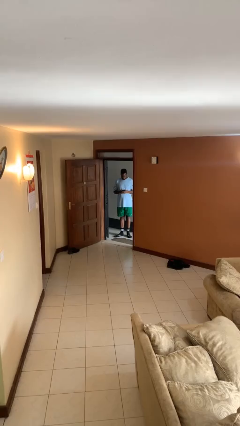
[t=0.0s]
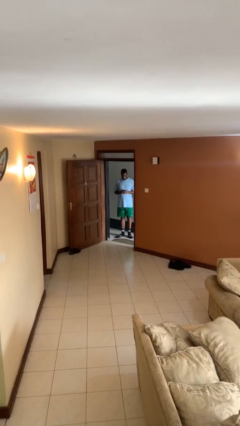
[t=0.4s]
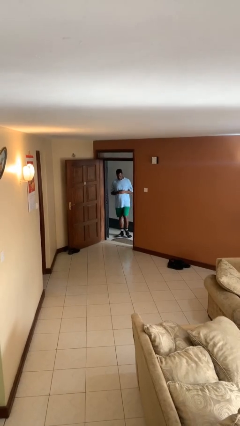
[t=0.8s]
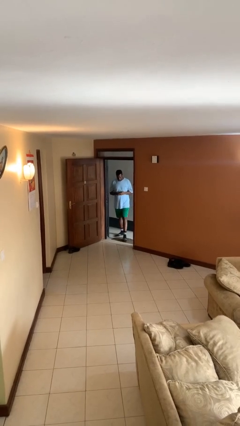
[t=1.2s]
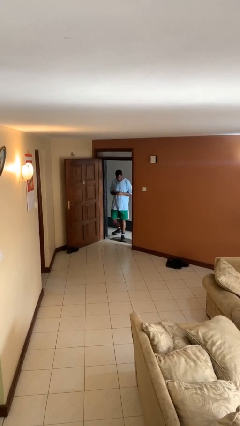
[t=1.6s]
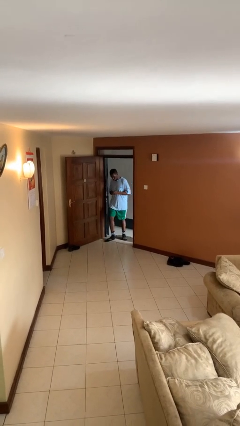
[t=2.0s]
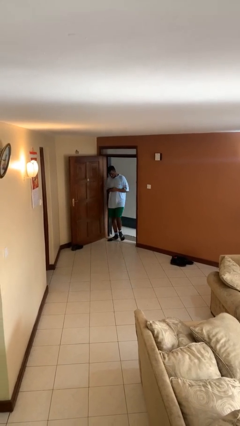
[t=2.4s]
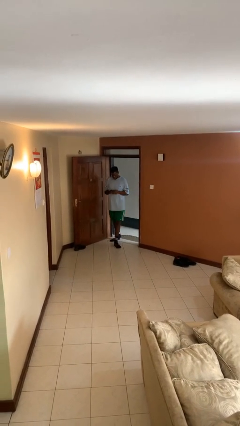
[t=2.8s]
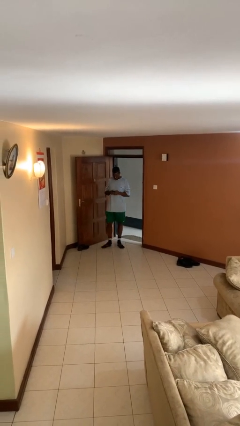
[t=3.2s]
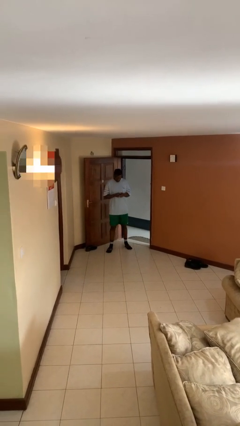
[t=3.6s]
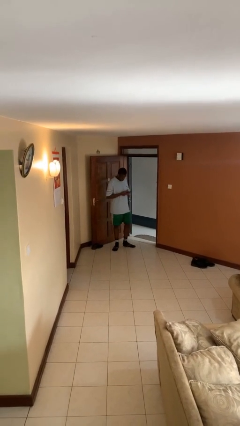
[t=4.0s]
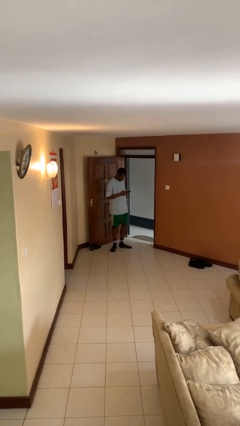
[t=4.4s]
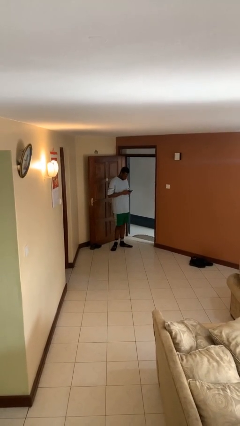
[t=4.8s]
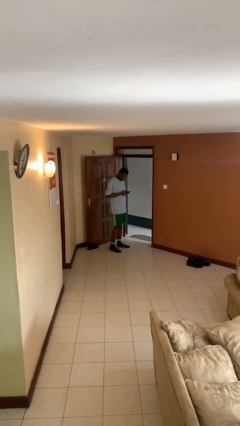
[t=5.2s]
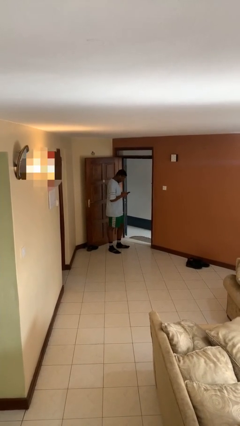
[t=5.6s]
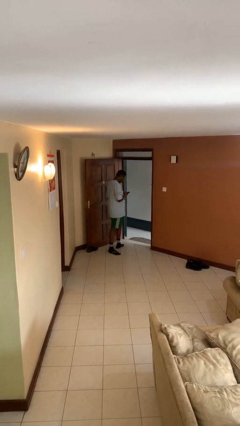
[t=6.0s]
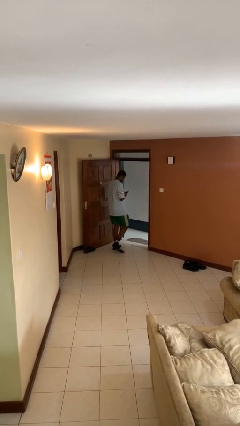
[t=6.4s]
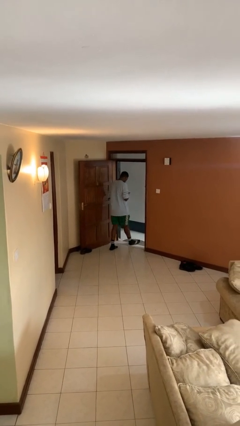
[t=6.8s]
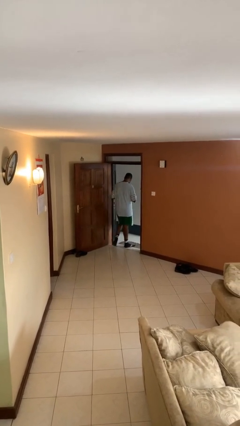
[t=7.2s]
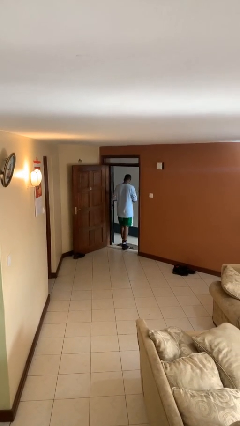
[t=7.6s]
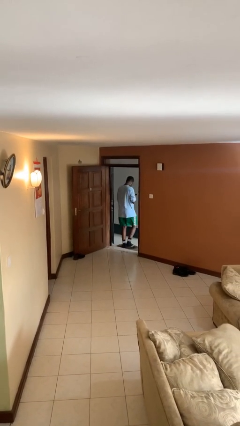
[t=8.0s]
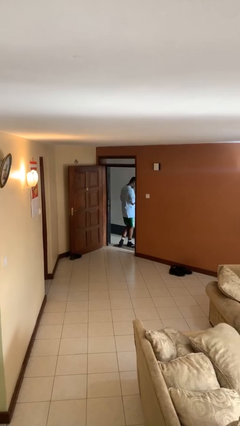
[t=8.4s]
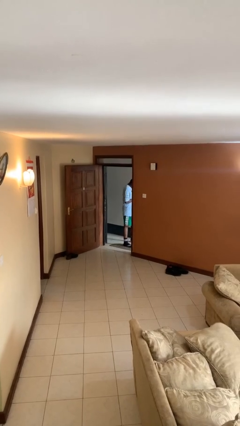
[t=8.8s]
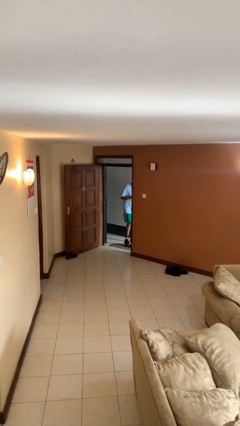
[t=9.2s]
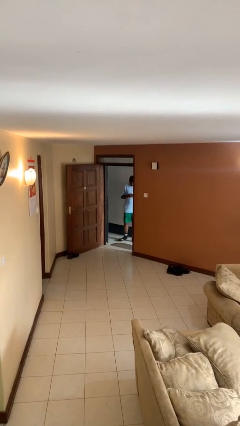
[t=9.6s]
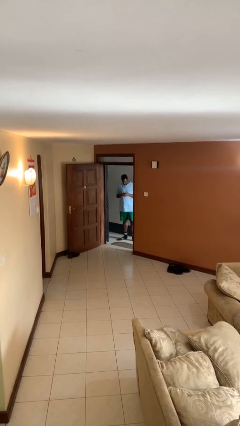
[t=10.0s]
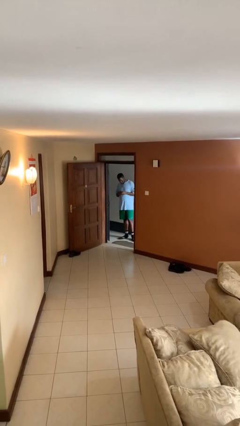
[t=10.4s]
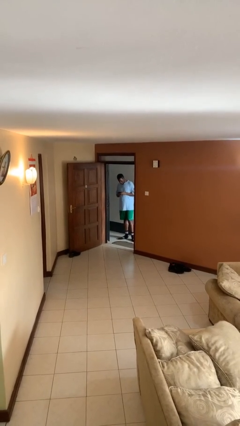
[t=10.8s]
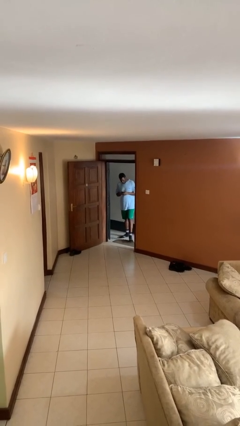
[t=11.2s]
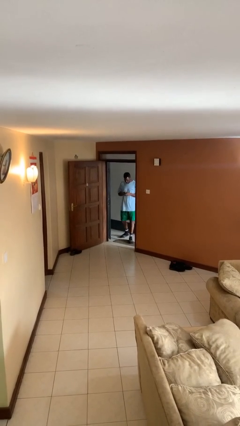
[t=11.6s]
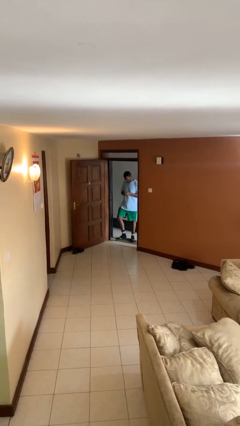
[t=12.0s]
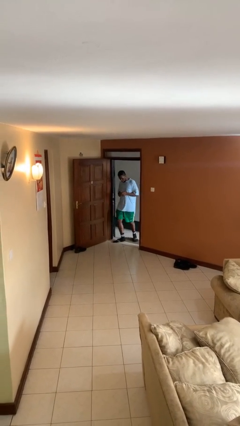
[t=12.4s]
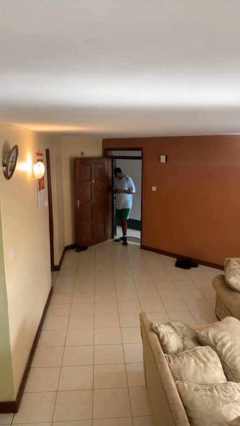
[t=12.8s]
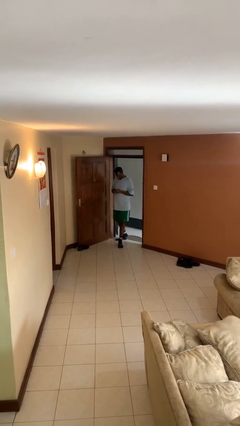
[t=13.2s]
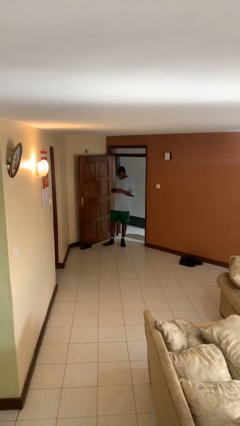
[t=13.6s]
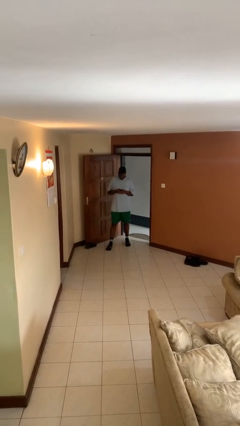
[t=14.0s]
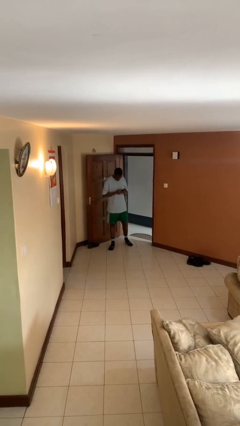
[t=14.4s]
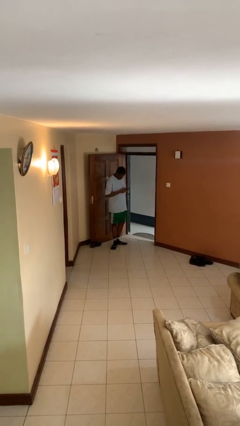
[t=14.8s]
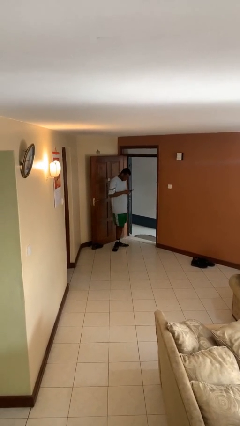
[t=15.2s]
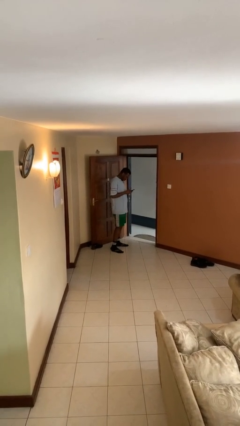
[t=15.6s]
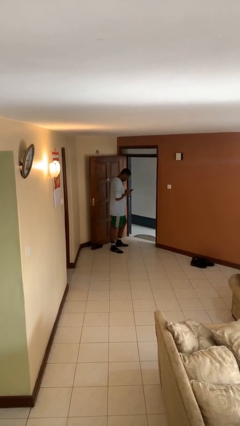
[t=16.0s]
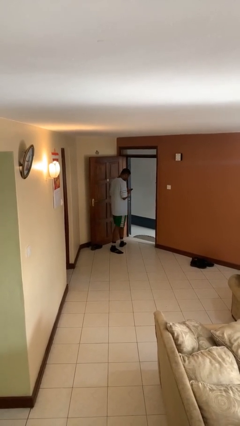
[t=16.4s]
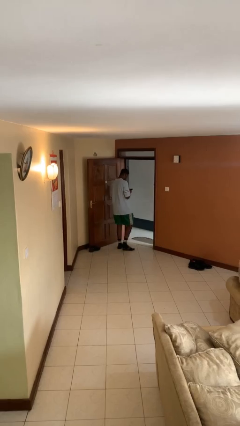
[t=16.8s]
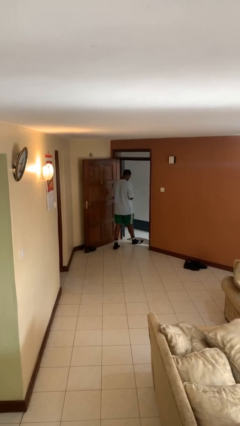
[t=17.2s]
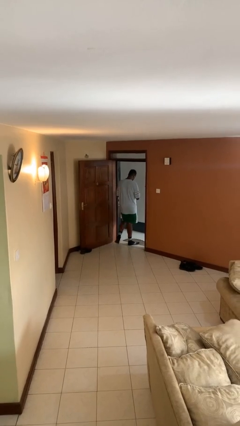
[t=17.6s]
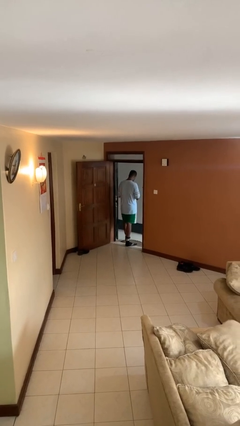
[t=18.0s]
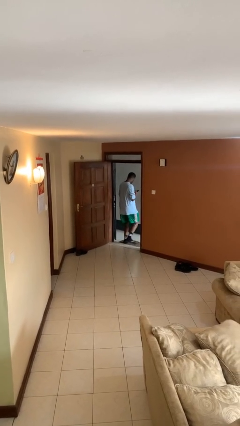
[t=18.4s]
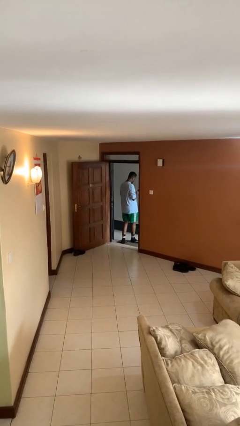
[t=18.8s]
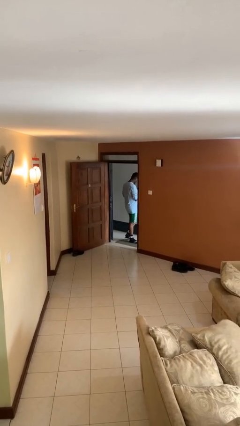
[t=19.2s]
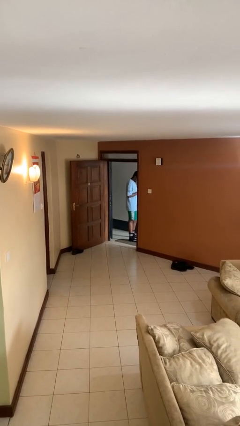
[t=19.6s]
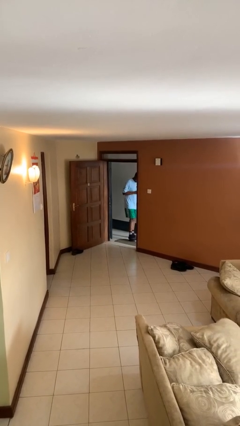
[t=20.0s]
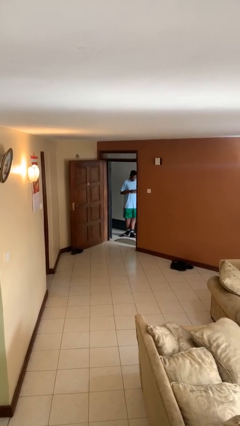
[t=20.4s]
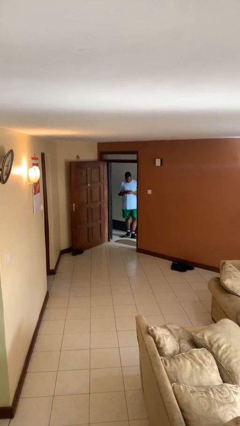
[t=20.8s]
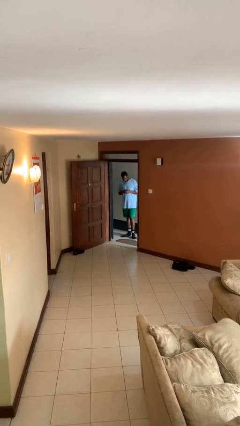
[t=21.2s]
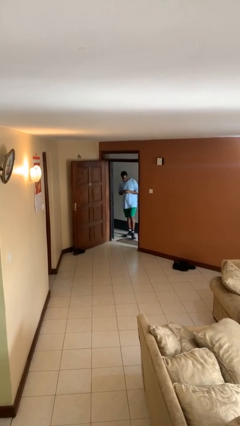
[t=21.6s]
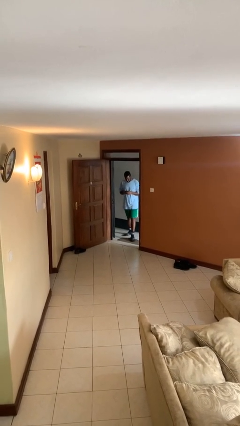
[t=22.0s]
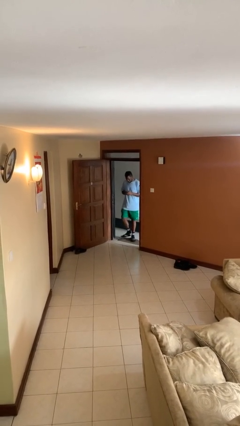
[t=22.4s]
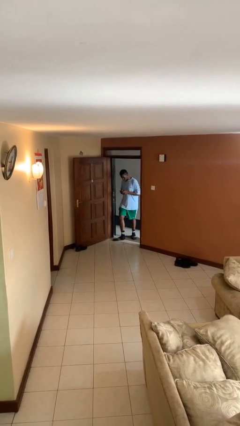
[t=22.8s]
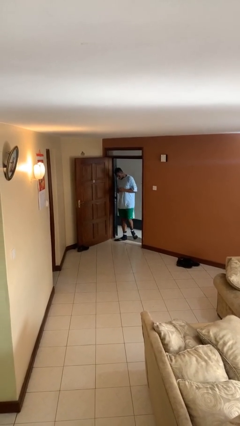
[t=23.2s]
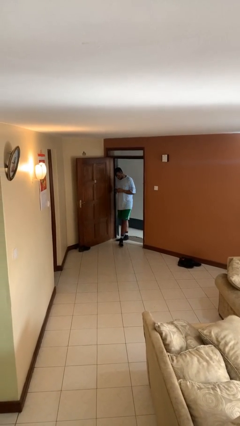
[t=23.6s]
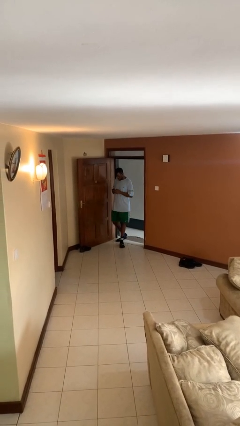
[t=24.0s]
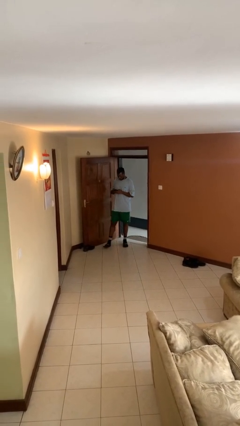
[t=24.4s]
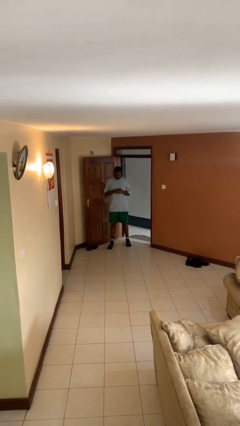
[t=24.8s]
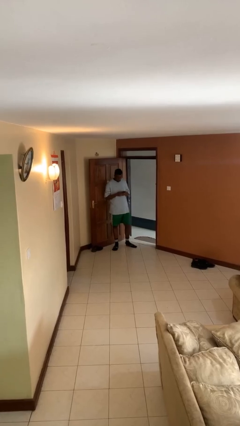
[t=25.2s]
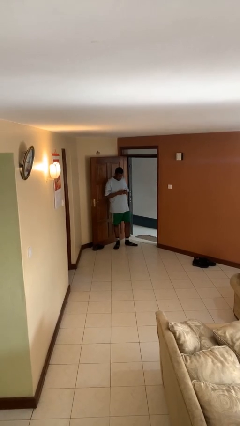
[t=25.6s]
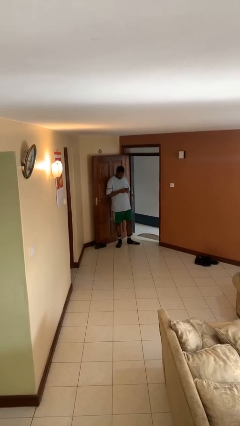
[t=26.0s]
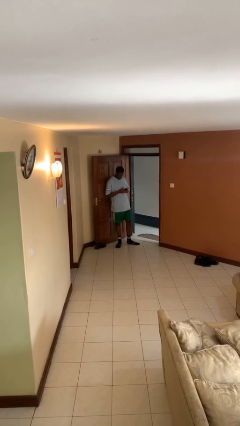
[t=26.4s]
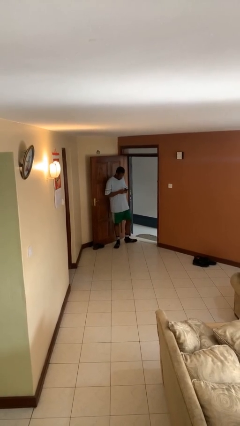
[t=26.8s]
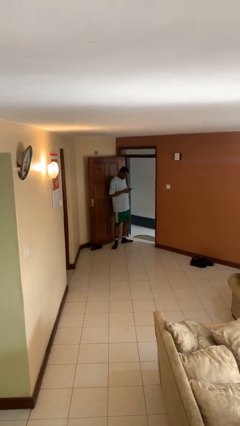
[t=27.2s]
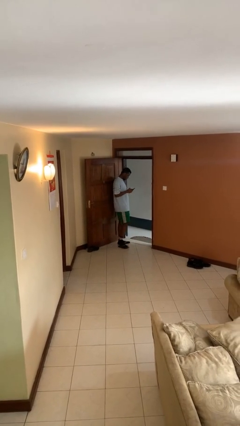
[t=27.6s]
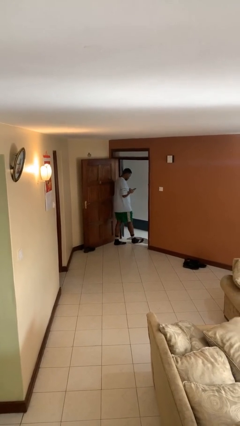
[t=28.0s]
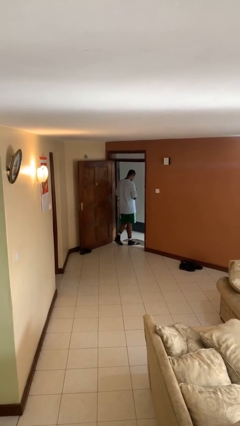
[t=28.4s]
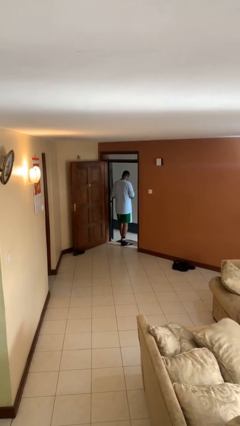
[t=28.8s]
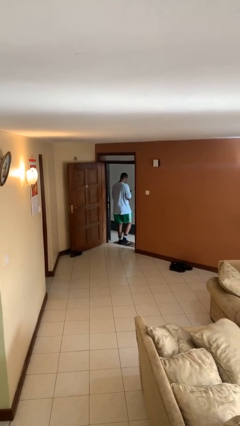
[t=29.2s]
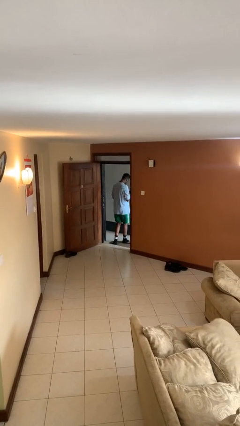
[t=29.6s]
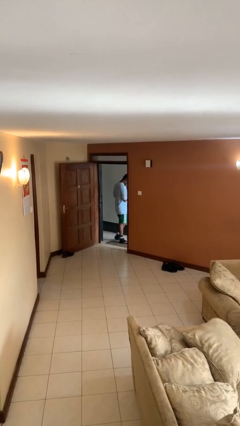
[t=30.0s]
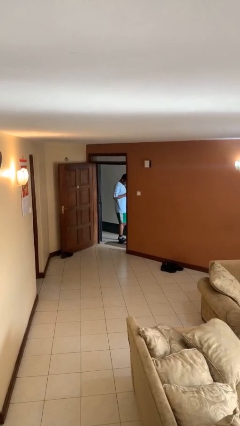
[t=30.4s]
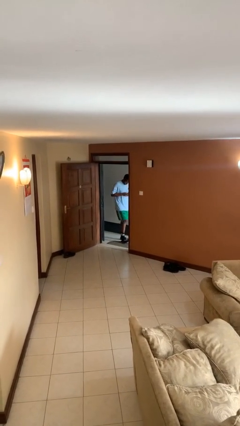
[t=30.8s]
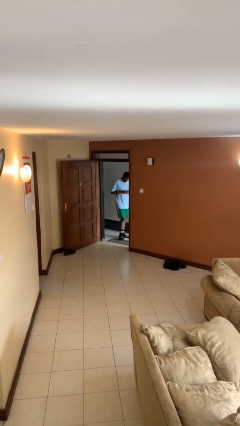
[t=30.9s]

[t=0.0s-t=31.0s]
person texts on phone

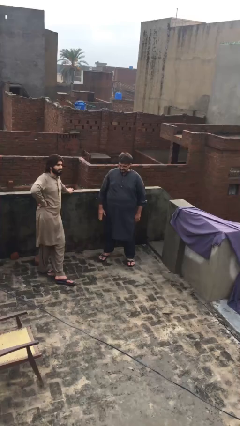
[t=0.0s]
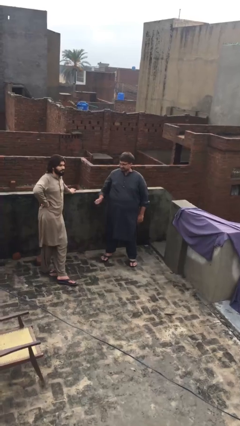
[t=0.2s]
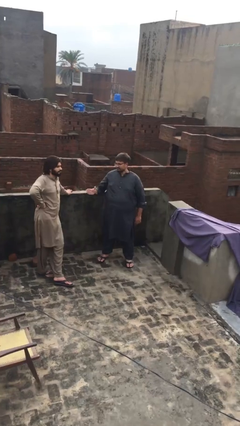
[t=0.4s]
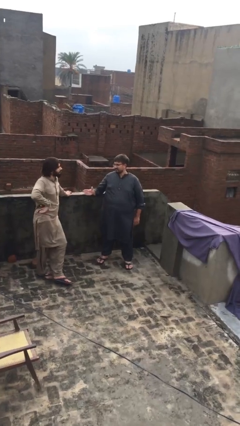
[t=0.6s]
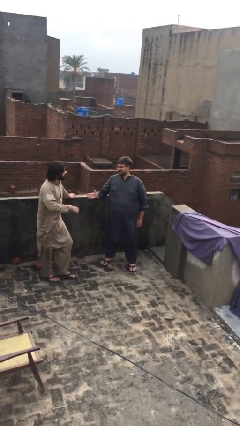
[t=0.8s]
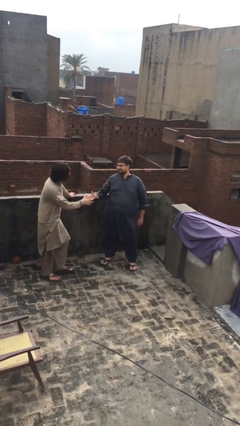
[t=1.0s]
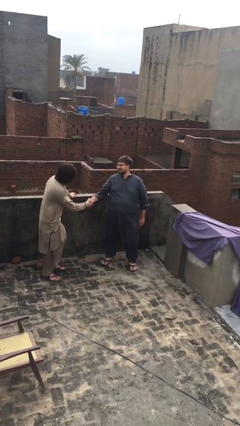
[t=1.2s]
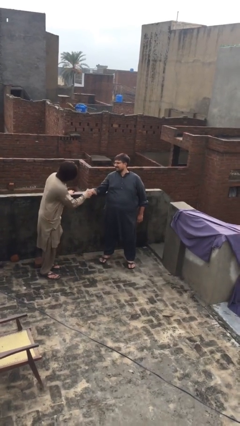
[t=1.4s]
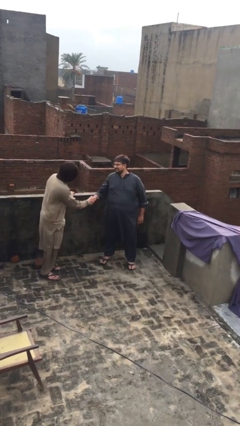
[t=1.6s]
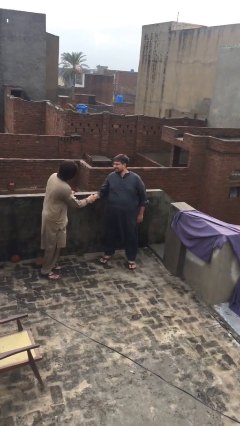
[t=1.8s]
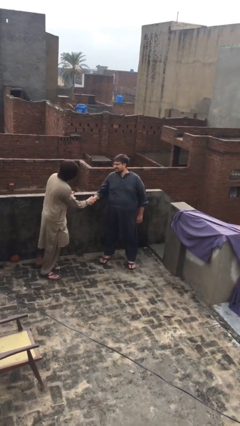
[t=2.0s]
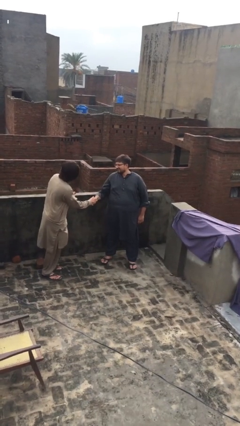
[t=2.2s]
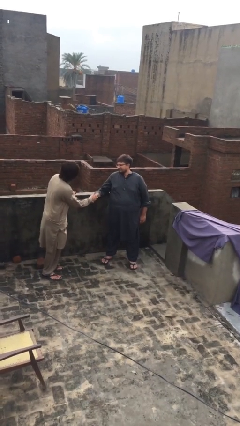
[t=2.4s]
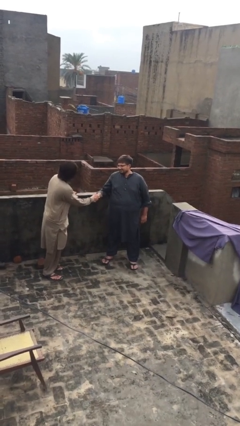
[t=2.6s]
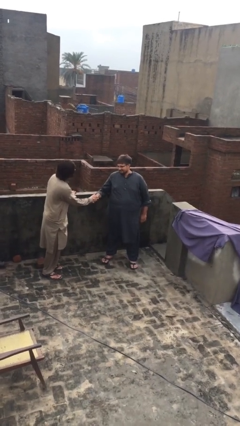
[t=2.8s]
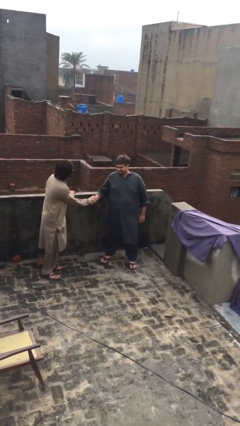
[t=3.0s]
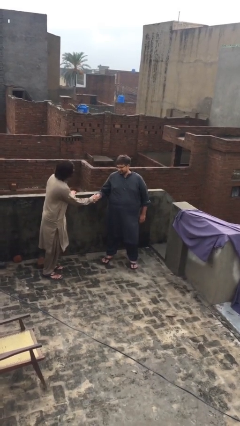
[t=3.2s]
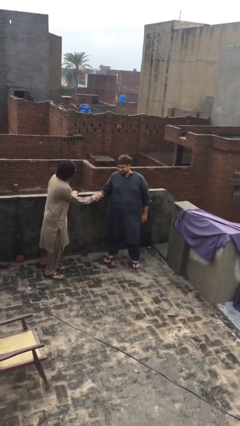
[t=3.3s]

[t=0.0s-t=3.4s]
person shakes hand
